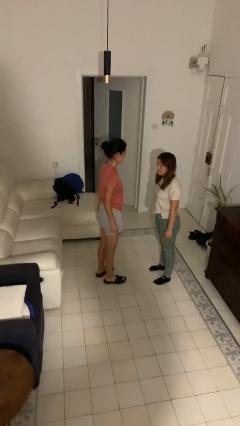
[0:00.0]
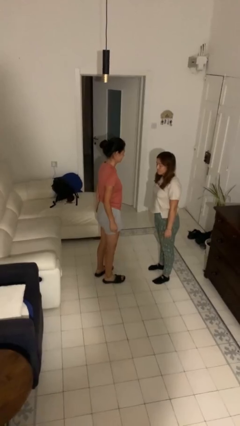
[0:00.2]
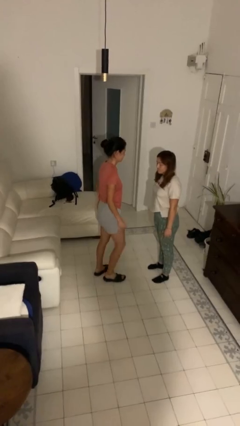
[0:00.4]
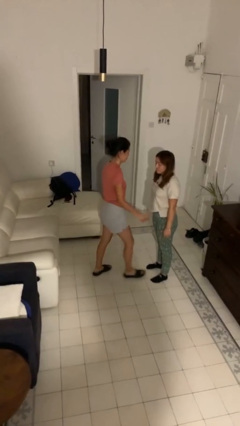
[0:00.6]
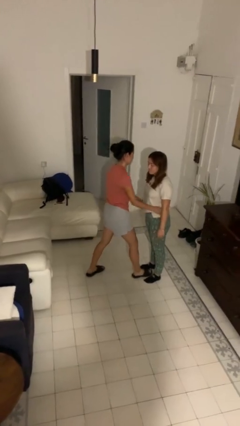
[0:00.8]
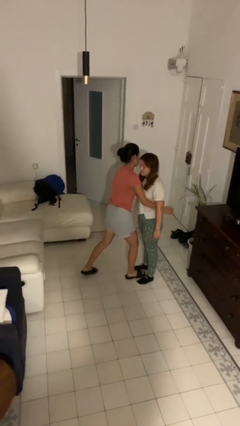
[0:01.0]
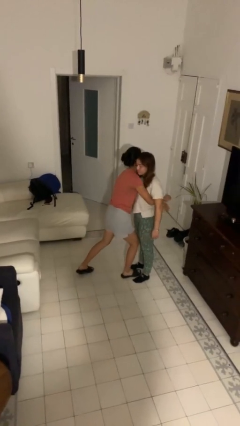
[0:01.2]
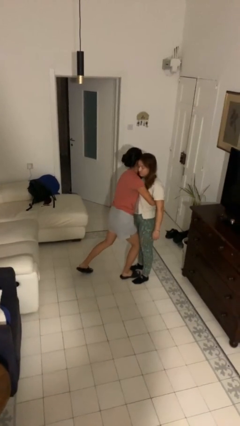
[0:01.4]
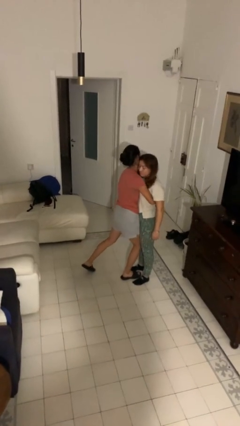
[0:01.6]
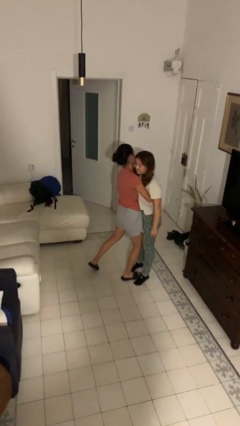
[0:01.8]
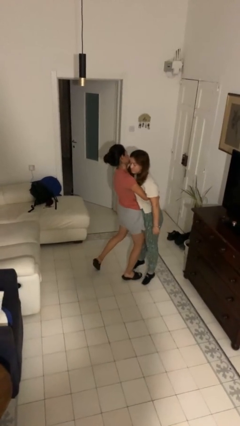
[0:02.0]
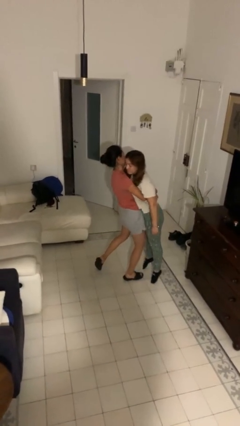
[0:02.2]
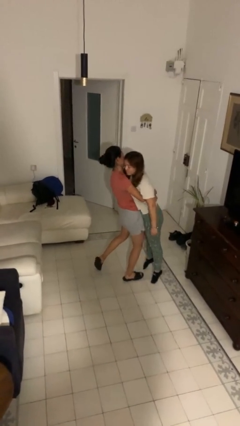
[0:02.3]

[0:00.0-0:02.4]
person picks up person

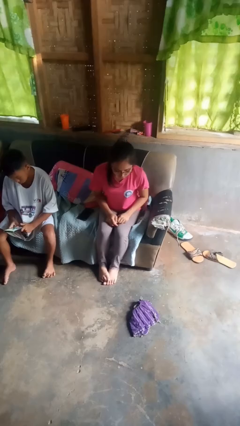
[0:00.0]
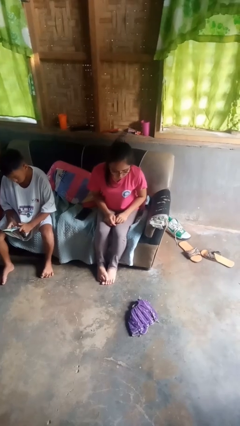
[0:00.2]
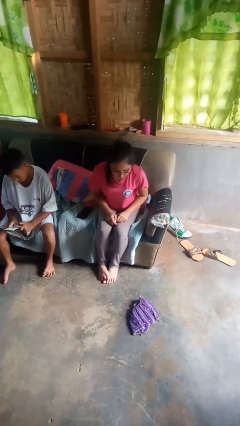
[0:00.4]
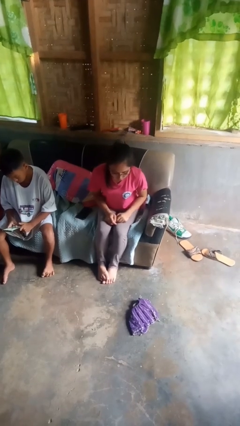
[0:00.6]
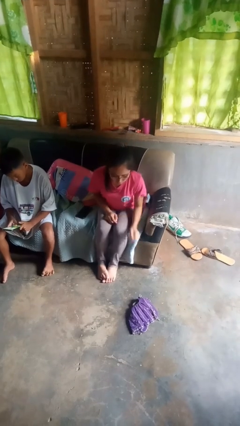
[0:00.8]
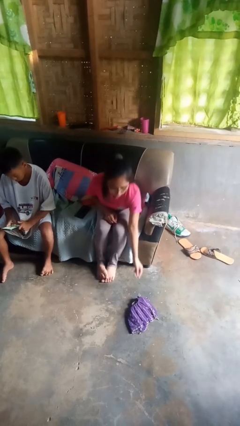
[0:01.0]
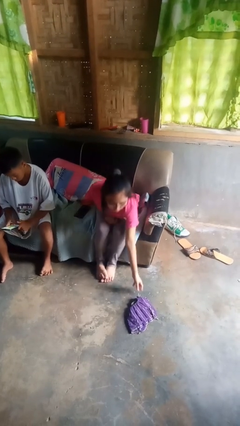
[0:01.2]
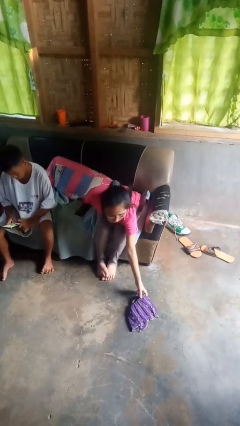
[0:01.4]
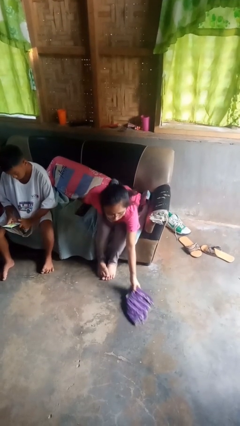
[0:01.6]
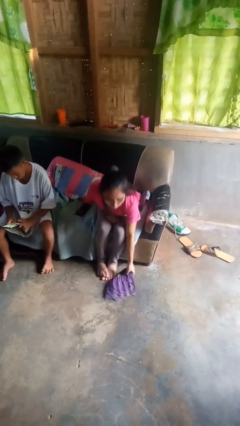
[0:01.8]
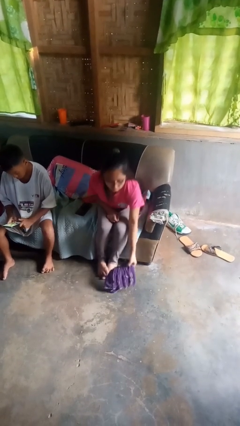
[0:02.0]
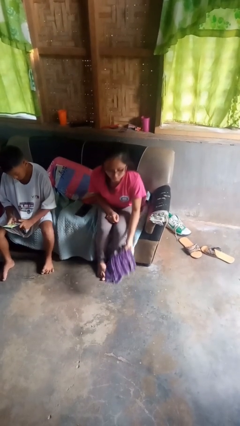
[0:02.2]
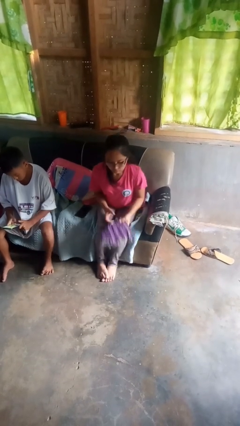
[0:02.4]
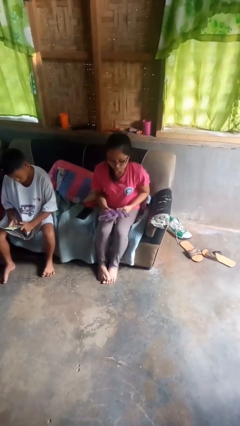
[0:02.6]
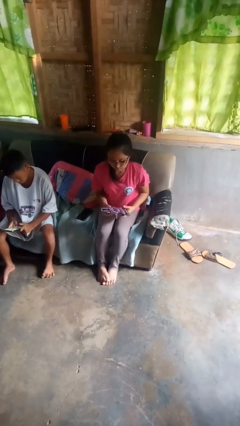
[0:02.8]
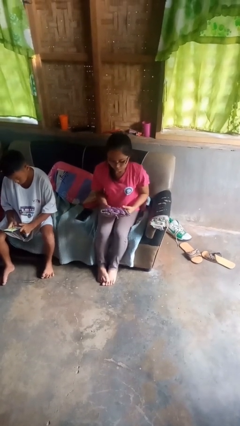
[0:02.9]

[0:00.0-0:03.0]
person picks up object from floor

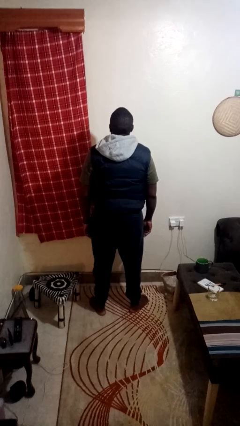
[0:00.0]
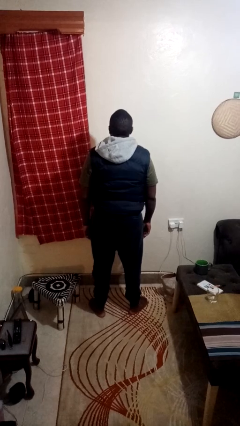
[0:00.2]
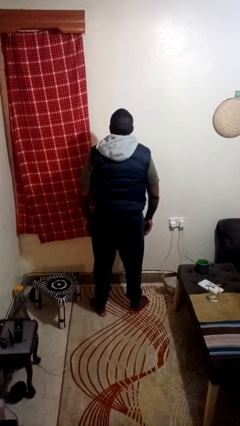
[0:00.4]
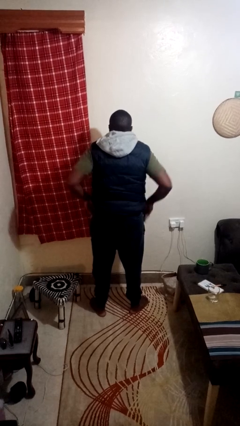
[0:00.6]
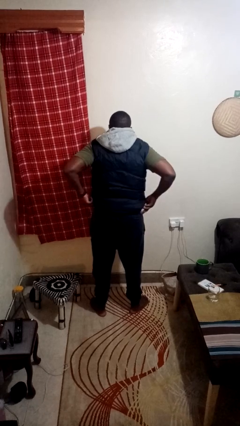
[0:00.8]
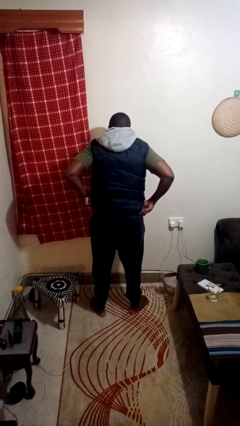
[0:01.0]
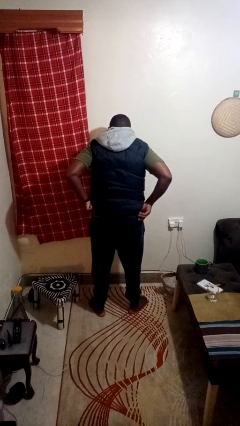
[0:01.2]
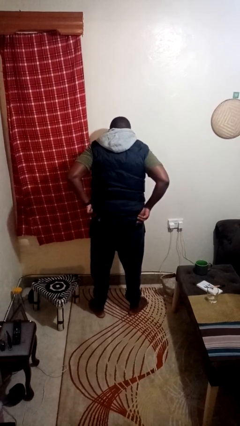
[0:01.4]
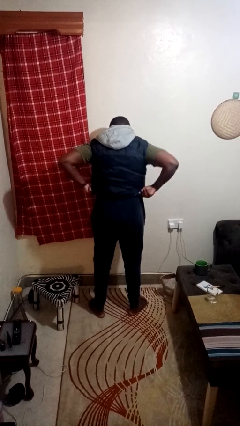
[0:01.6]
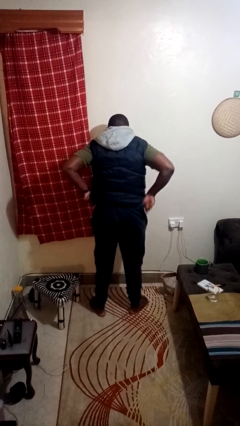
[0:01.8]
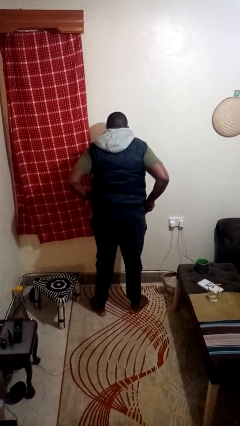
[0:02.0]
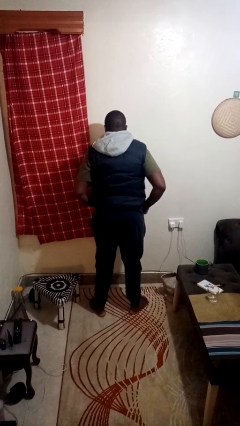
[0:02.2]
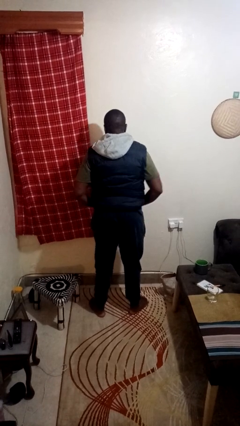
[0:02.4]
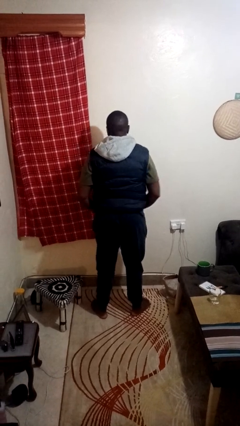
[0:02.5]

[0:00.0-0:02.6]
person hikes up pants

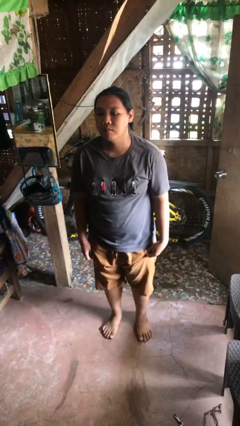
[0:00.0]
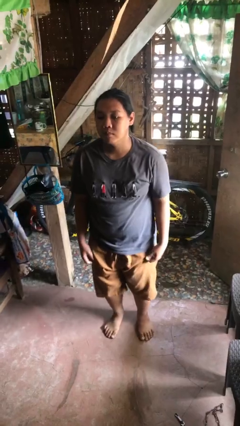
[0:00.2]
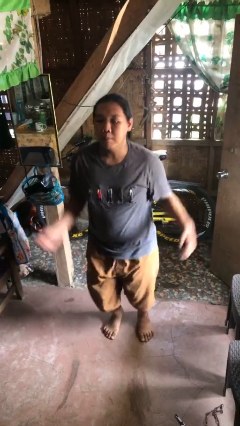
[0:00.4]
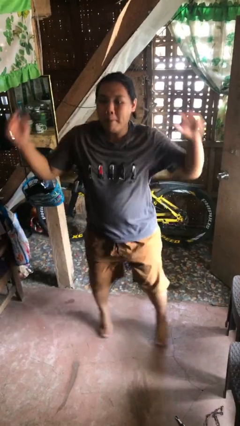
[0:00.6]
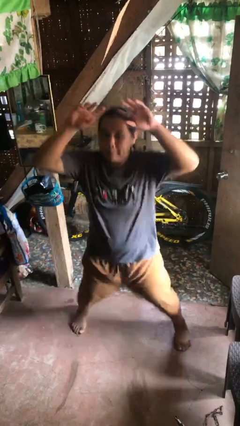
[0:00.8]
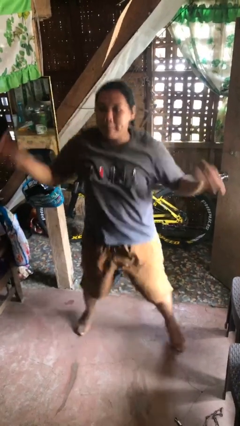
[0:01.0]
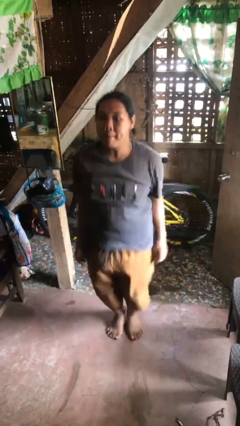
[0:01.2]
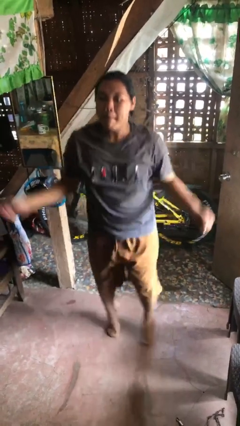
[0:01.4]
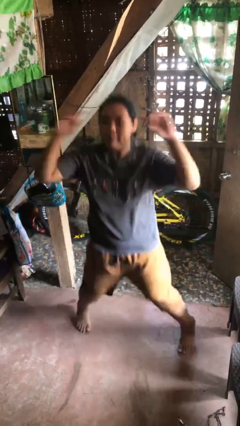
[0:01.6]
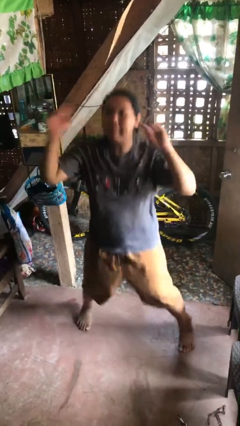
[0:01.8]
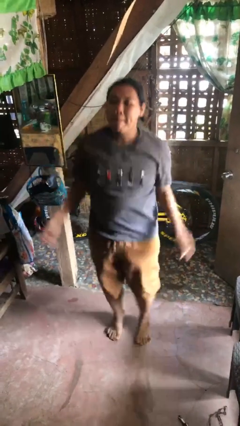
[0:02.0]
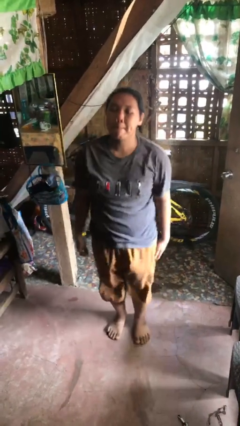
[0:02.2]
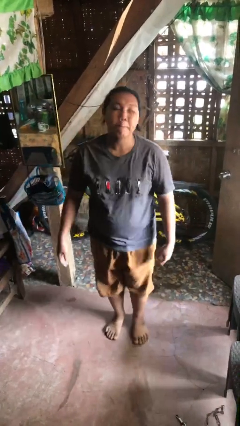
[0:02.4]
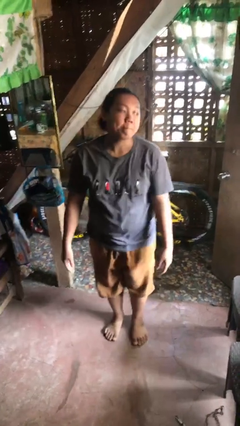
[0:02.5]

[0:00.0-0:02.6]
person exercises with jumping jacks

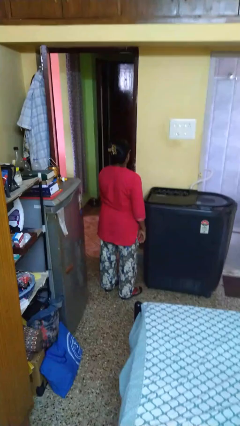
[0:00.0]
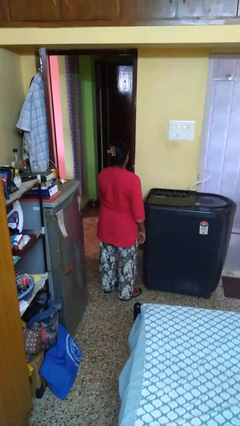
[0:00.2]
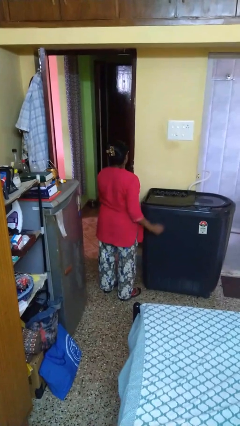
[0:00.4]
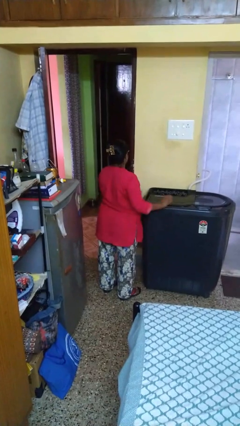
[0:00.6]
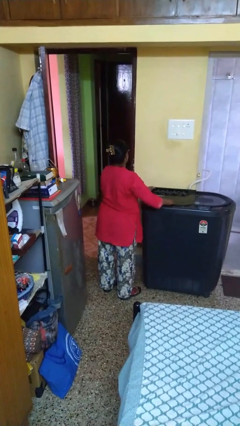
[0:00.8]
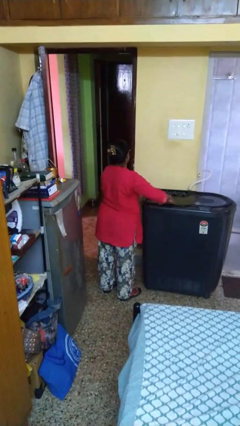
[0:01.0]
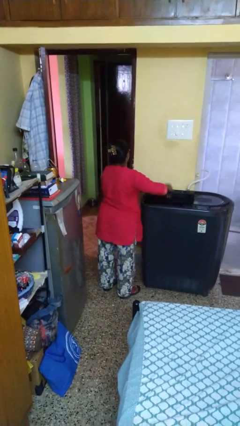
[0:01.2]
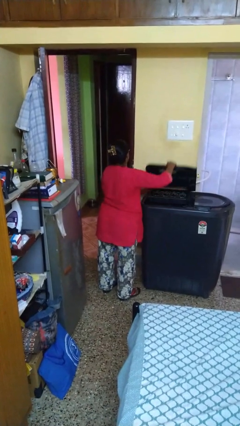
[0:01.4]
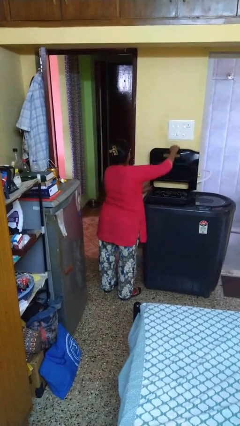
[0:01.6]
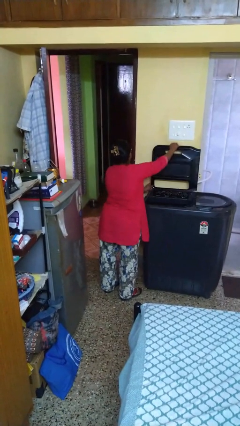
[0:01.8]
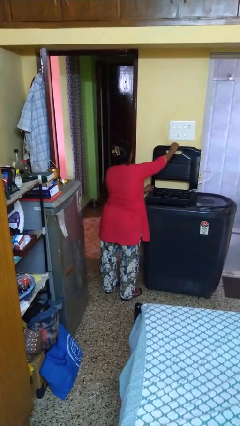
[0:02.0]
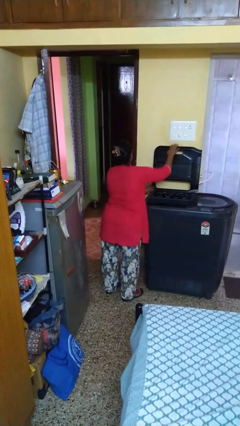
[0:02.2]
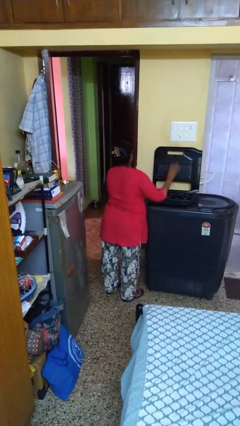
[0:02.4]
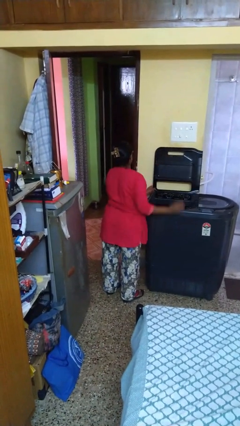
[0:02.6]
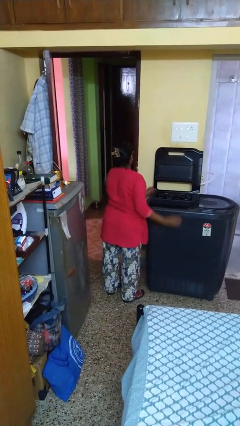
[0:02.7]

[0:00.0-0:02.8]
person opens clothes washer

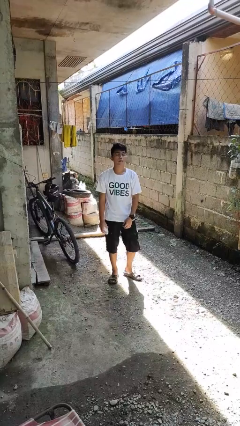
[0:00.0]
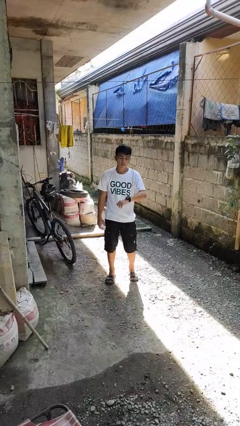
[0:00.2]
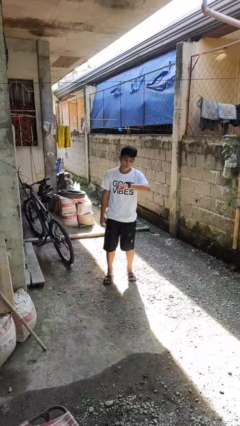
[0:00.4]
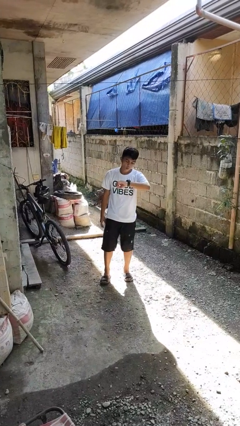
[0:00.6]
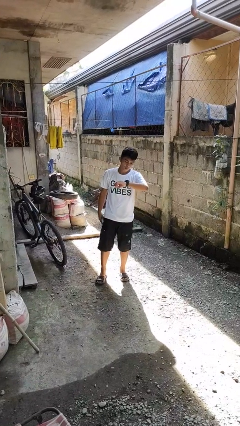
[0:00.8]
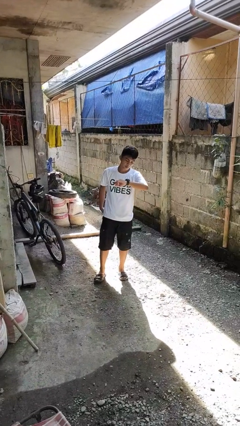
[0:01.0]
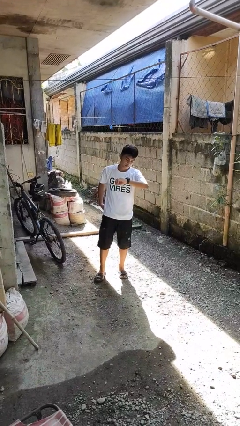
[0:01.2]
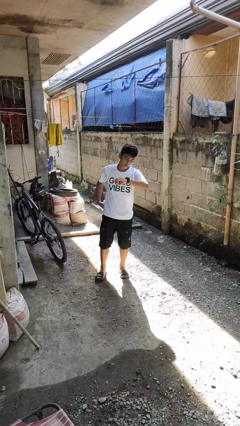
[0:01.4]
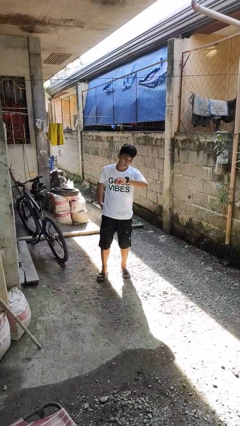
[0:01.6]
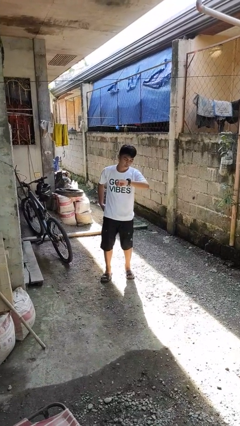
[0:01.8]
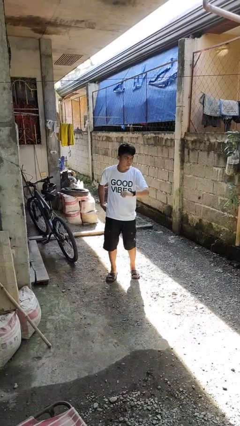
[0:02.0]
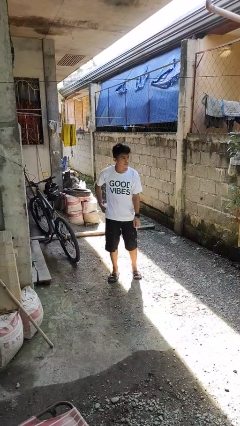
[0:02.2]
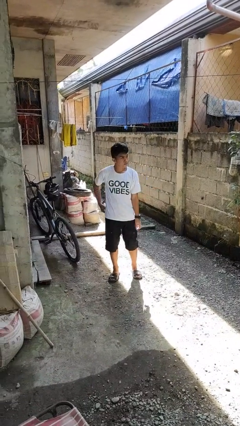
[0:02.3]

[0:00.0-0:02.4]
person looks at wristwatch

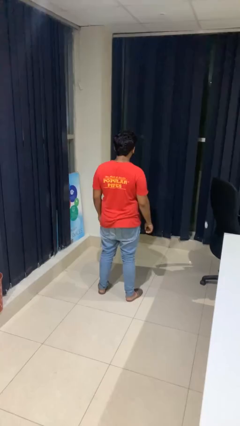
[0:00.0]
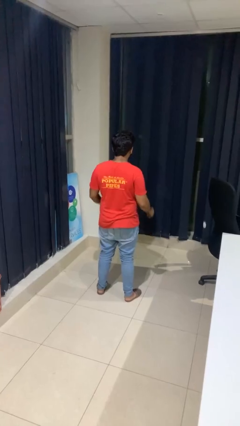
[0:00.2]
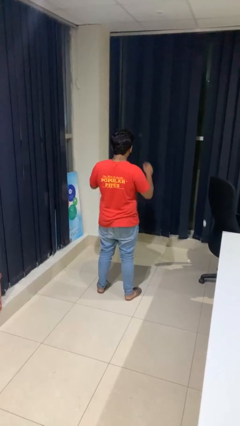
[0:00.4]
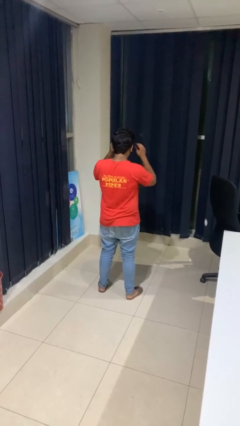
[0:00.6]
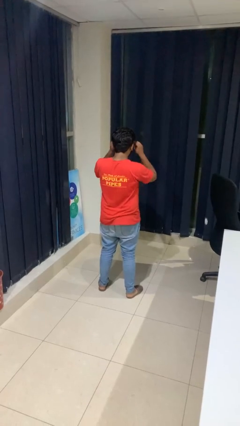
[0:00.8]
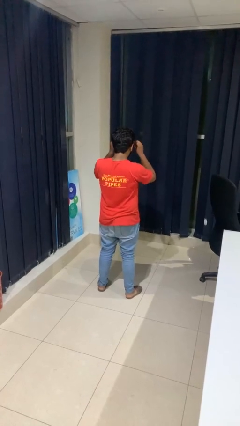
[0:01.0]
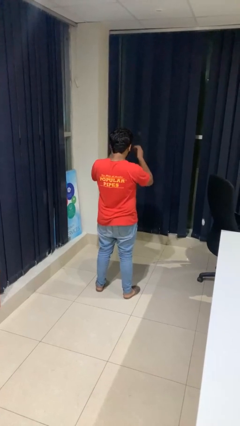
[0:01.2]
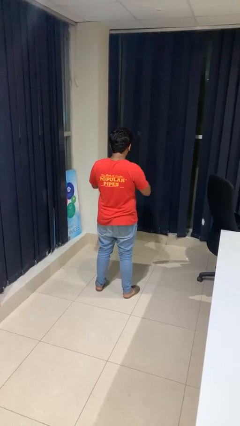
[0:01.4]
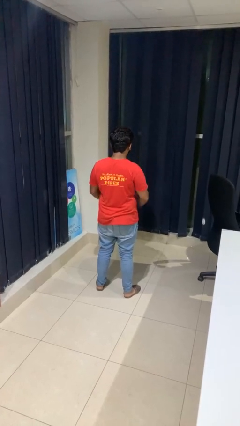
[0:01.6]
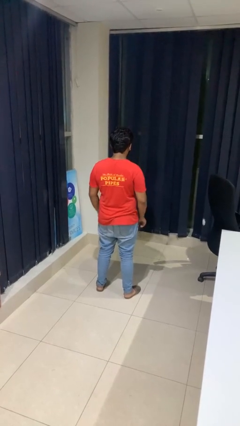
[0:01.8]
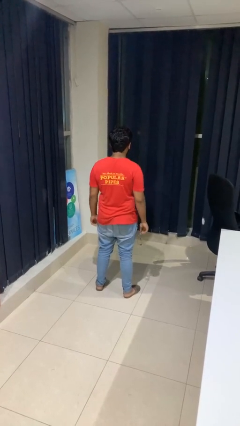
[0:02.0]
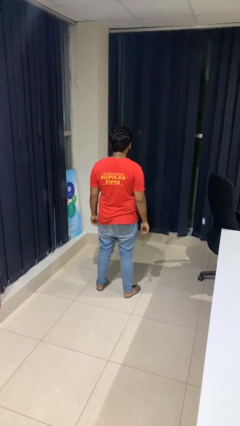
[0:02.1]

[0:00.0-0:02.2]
person takes off glasses
